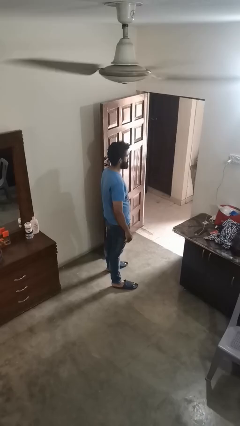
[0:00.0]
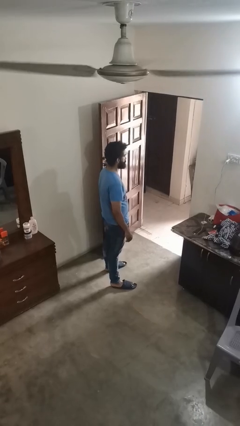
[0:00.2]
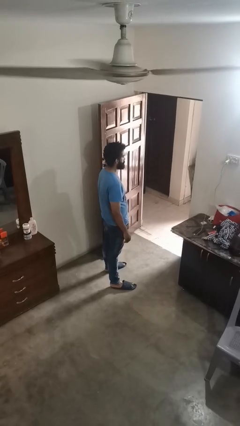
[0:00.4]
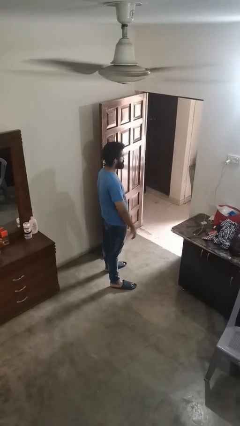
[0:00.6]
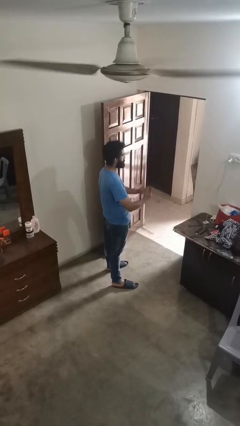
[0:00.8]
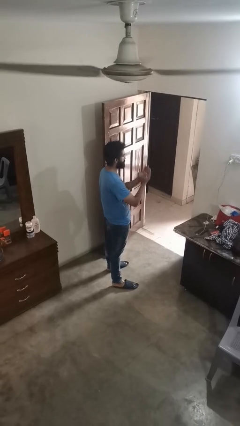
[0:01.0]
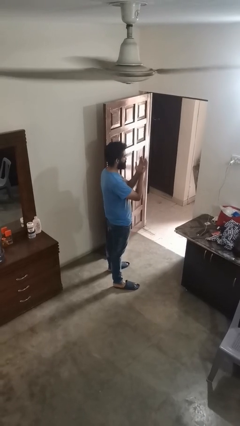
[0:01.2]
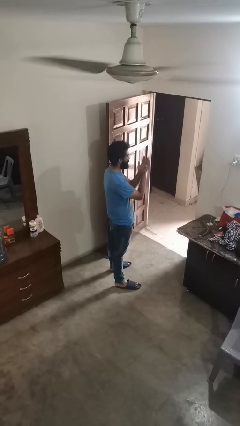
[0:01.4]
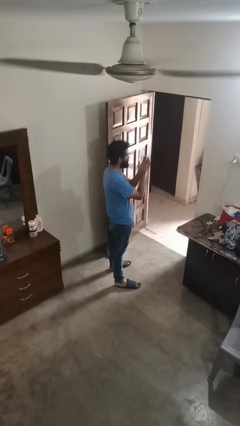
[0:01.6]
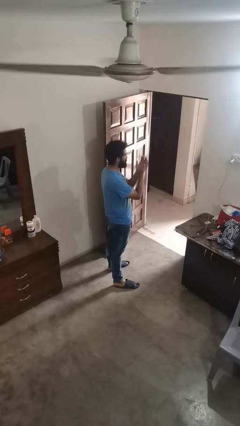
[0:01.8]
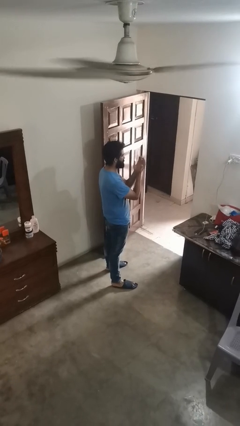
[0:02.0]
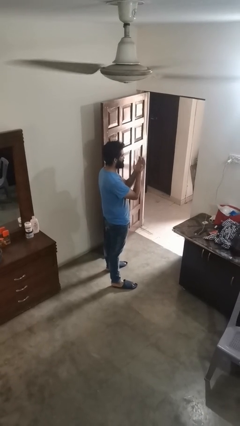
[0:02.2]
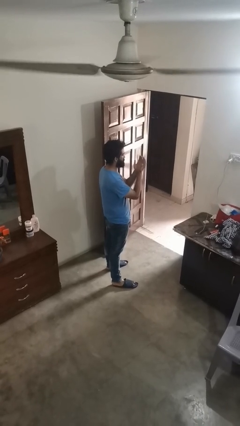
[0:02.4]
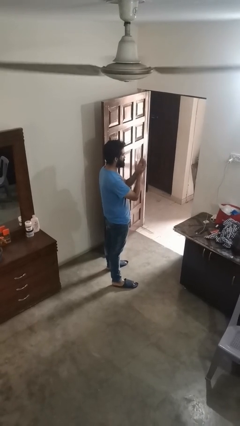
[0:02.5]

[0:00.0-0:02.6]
person prays

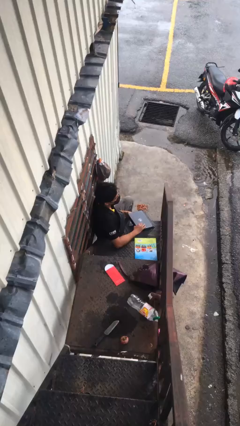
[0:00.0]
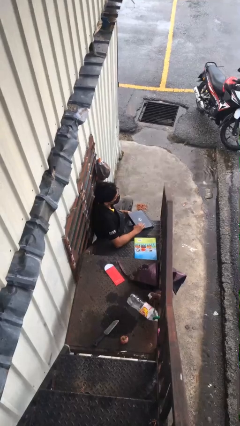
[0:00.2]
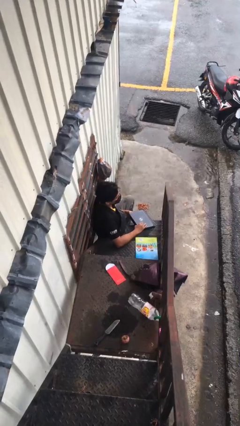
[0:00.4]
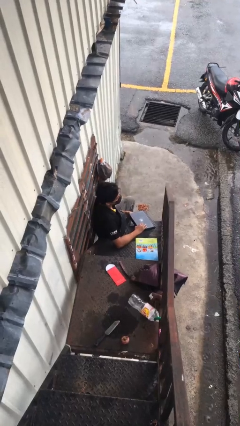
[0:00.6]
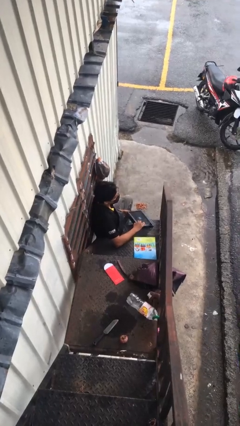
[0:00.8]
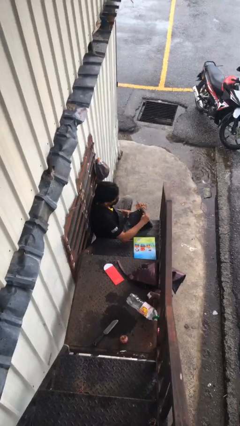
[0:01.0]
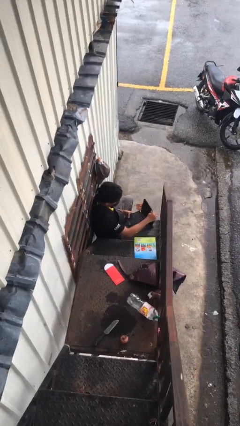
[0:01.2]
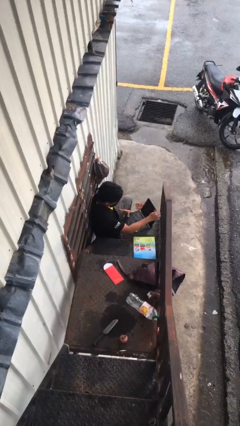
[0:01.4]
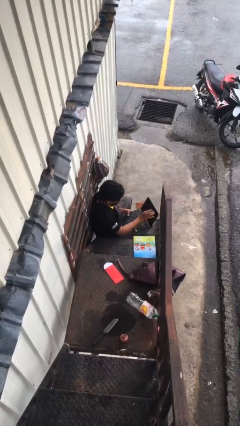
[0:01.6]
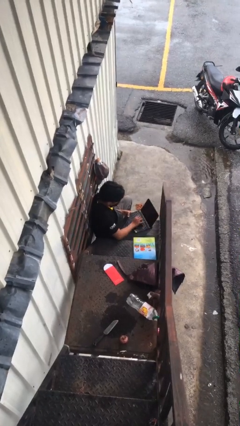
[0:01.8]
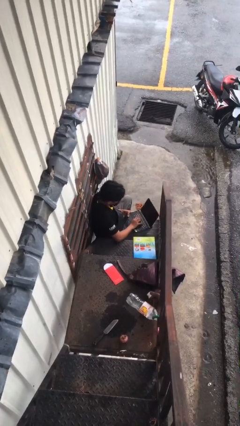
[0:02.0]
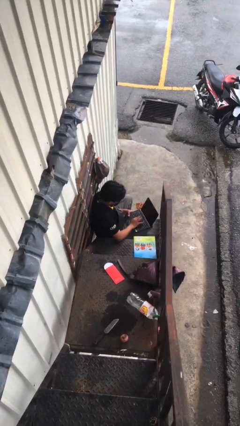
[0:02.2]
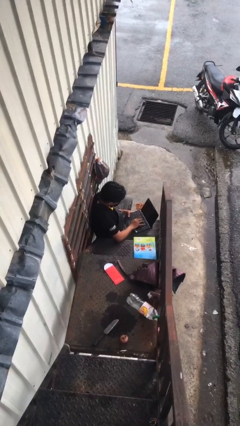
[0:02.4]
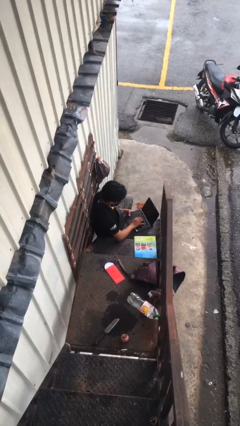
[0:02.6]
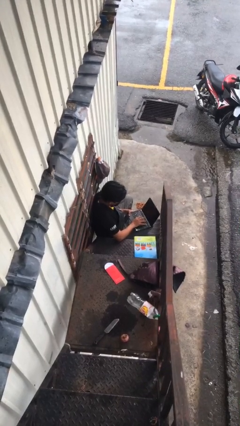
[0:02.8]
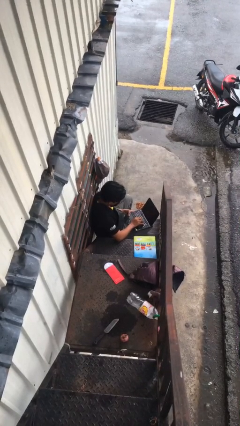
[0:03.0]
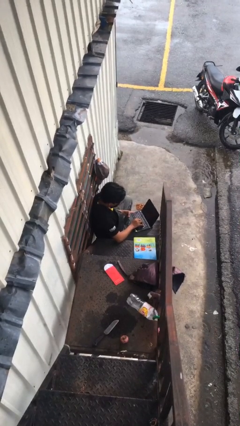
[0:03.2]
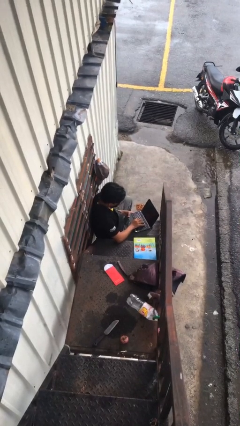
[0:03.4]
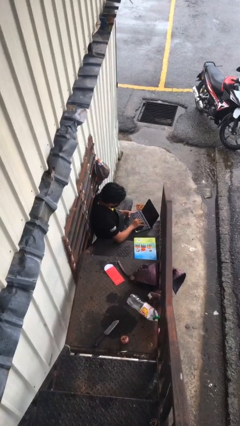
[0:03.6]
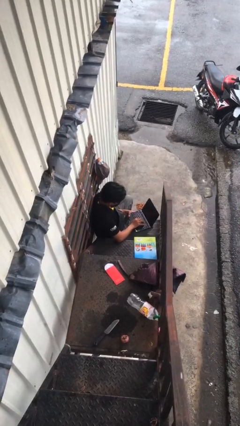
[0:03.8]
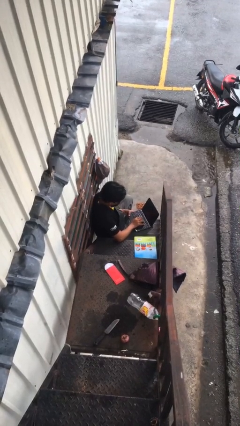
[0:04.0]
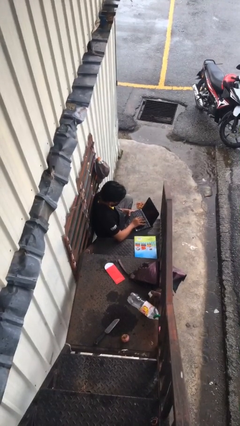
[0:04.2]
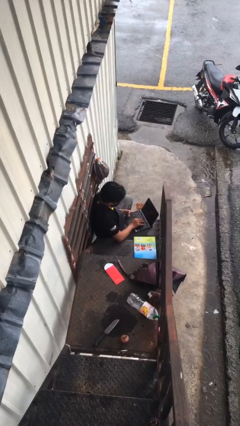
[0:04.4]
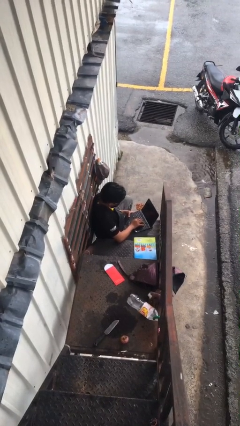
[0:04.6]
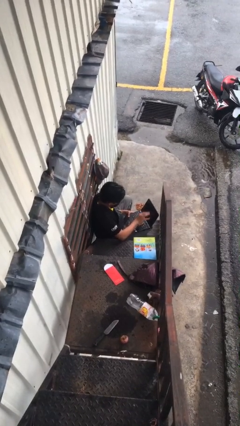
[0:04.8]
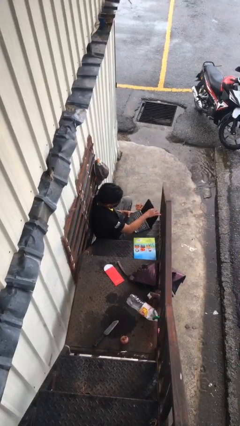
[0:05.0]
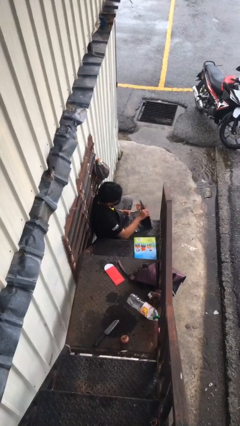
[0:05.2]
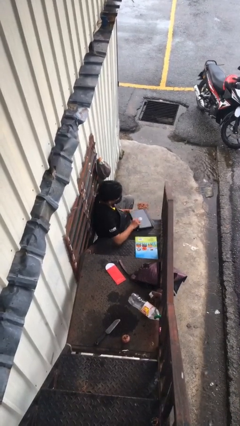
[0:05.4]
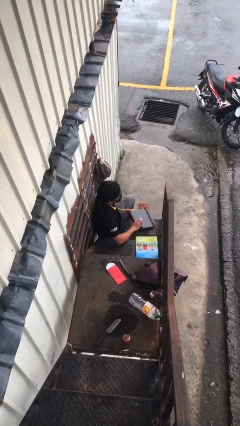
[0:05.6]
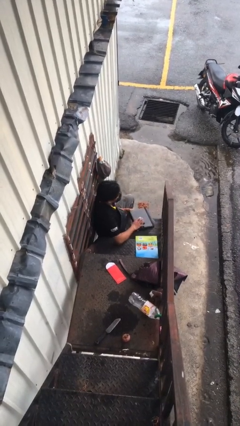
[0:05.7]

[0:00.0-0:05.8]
person interacts with laptop

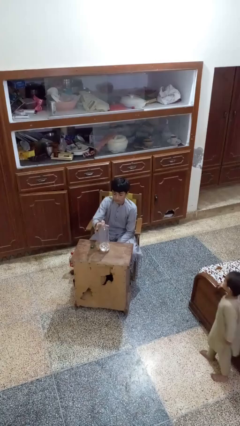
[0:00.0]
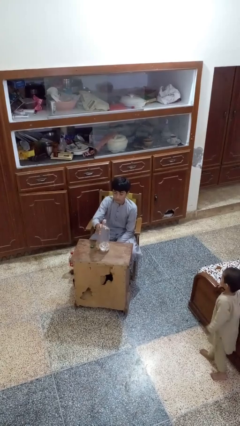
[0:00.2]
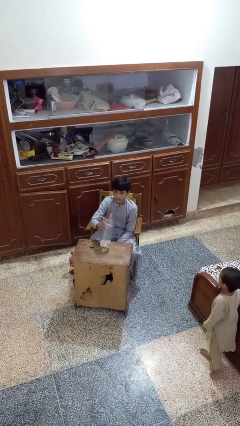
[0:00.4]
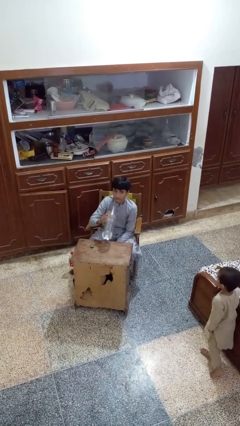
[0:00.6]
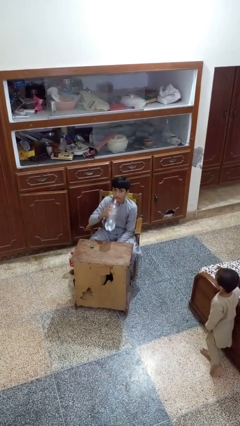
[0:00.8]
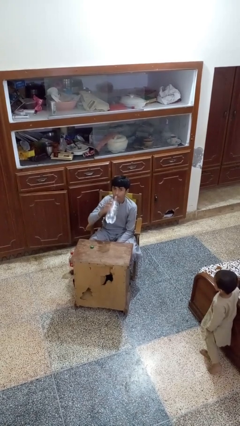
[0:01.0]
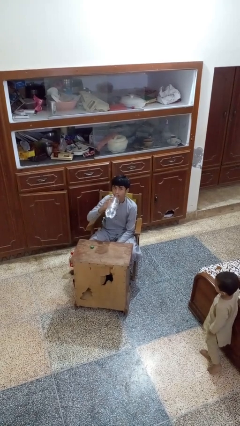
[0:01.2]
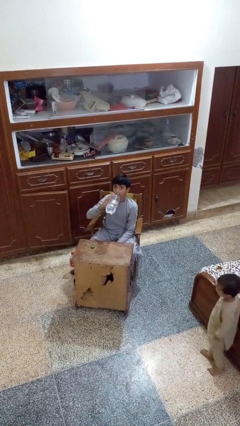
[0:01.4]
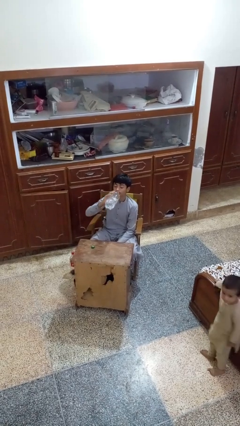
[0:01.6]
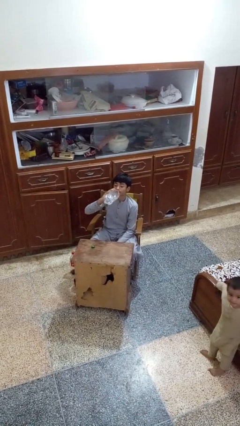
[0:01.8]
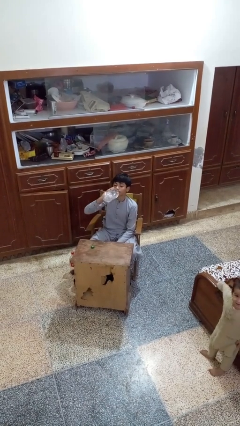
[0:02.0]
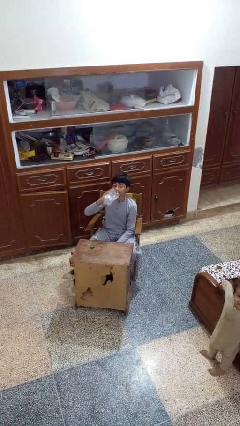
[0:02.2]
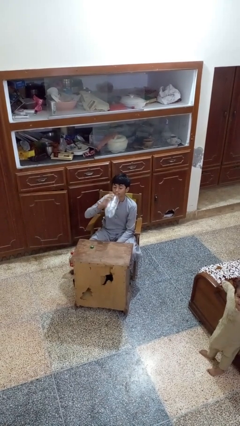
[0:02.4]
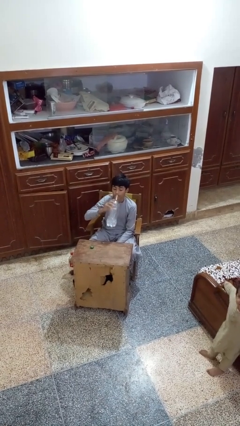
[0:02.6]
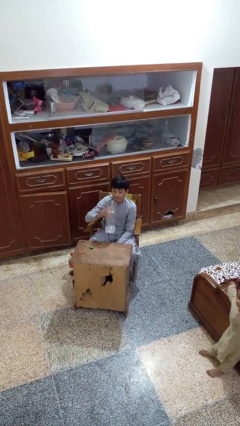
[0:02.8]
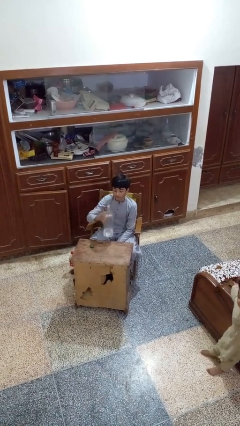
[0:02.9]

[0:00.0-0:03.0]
person drinks from bottle

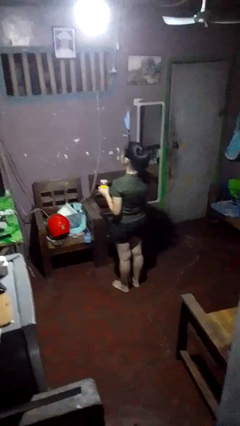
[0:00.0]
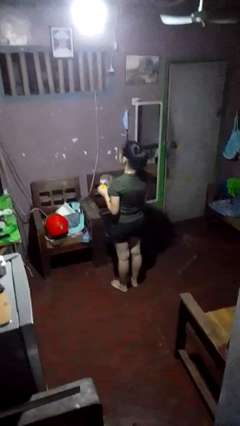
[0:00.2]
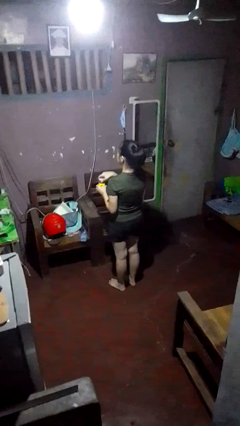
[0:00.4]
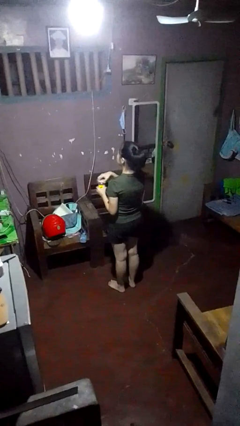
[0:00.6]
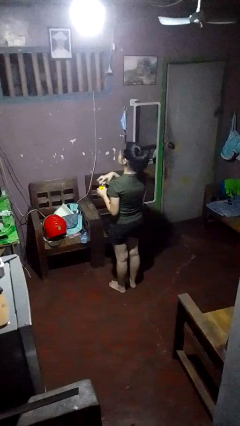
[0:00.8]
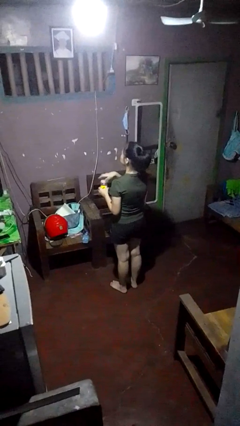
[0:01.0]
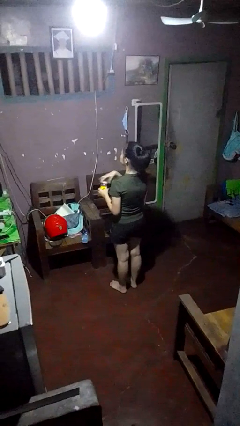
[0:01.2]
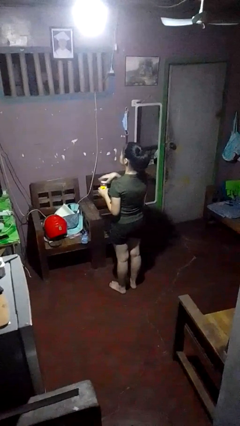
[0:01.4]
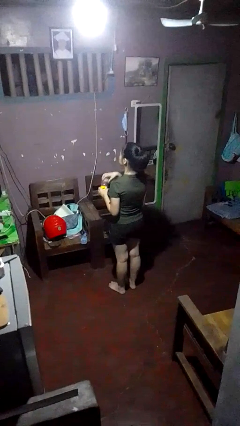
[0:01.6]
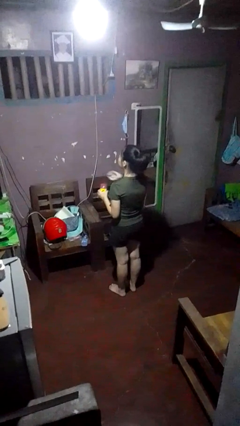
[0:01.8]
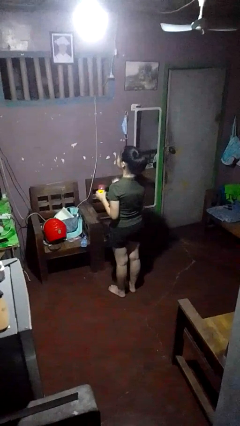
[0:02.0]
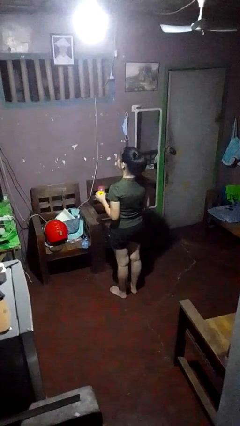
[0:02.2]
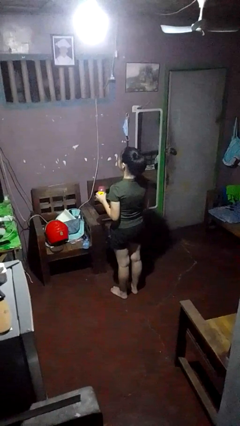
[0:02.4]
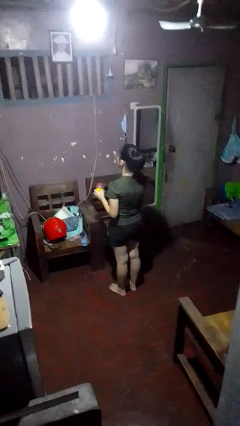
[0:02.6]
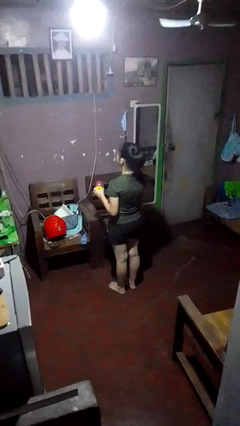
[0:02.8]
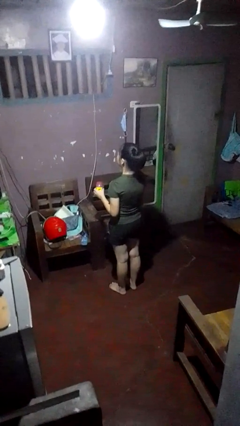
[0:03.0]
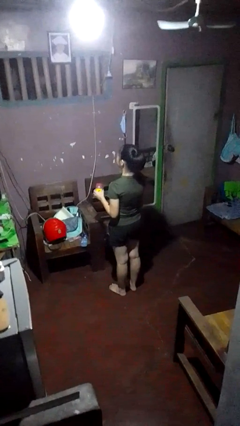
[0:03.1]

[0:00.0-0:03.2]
person opens jar

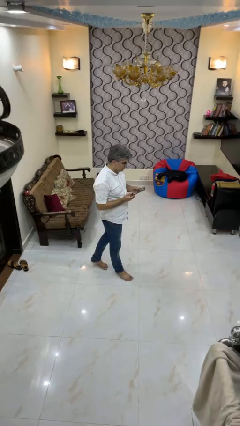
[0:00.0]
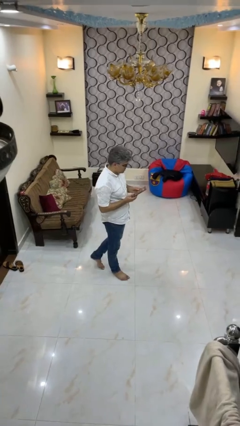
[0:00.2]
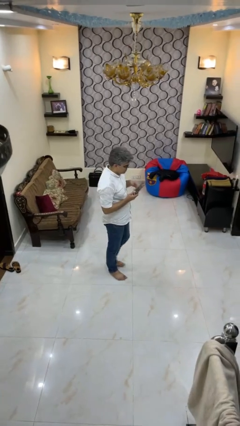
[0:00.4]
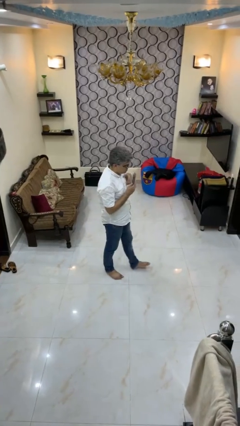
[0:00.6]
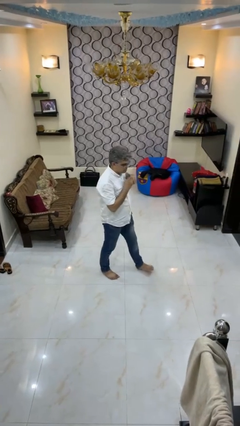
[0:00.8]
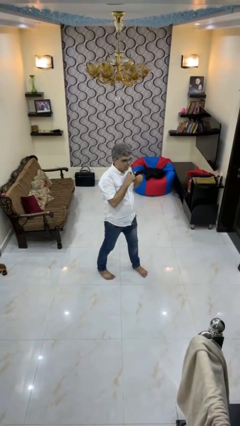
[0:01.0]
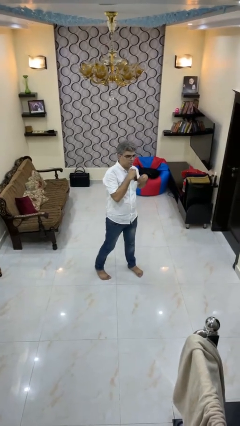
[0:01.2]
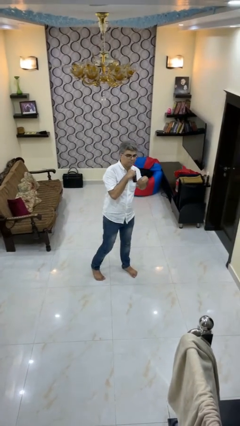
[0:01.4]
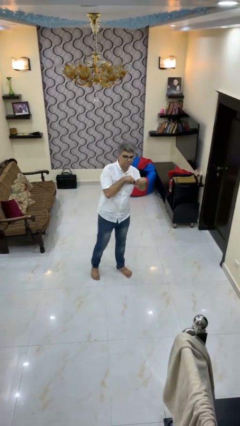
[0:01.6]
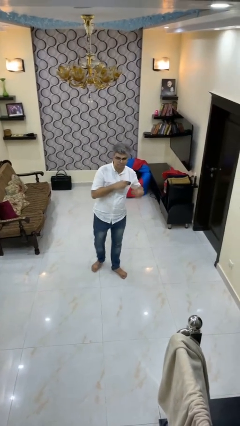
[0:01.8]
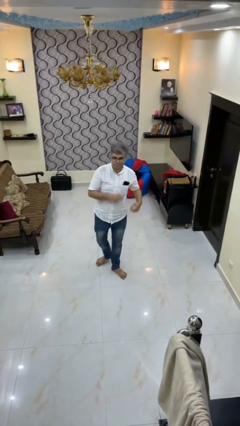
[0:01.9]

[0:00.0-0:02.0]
person puts phone into pocket

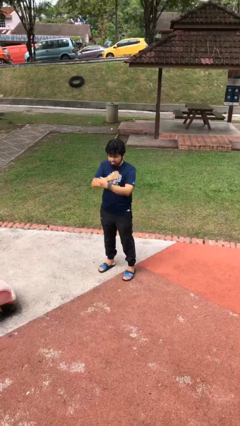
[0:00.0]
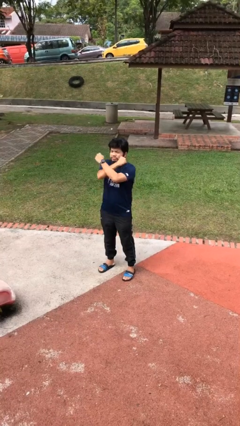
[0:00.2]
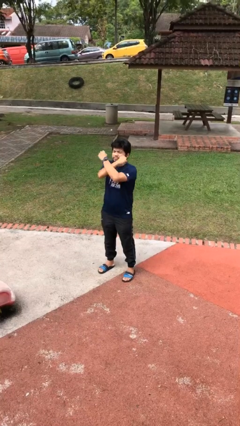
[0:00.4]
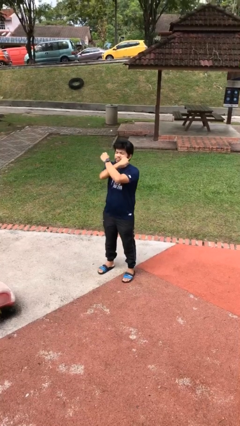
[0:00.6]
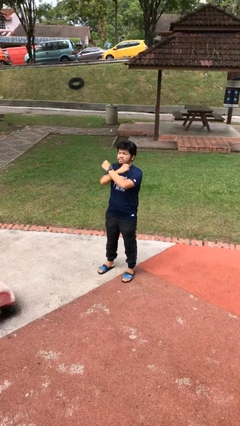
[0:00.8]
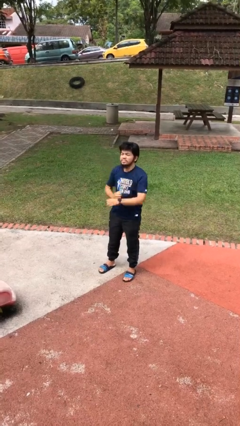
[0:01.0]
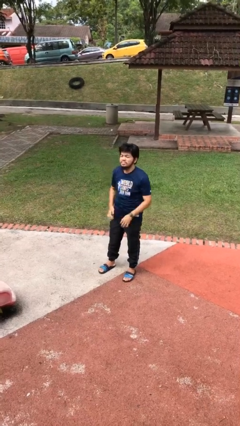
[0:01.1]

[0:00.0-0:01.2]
person gestures arms x
